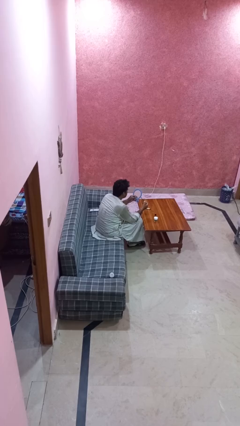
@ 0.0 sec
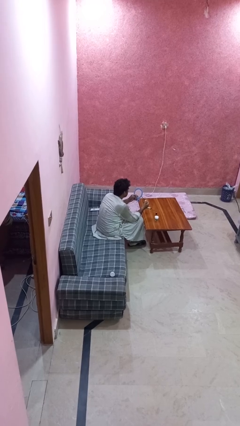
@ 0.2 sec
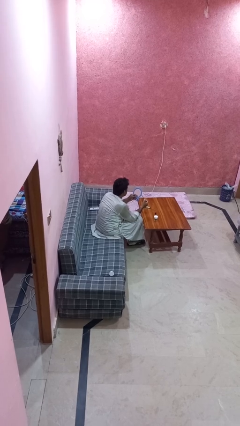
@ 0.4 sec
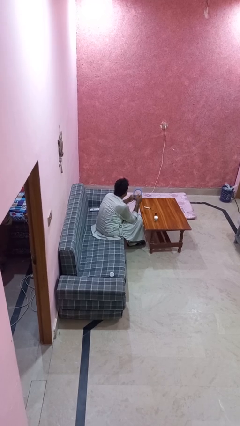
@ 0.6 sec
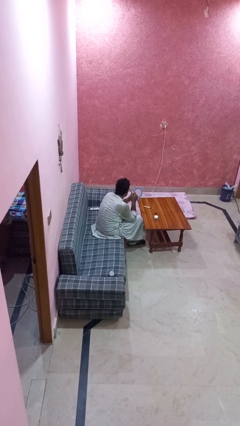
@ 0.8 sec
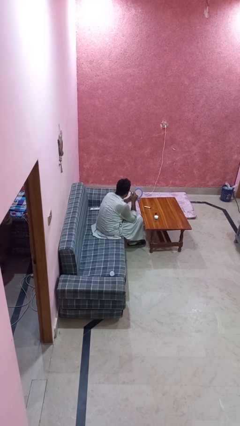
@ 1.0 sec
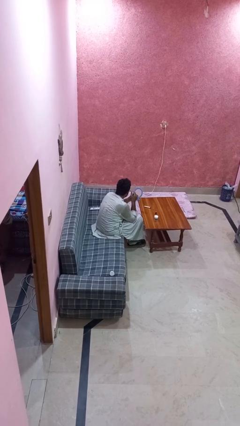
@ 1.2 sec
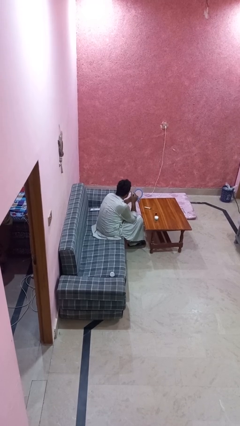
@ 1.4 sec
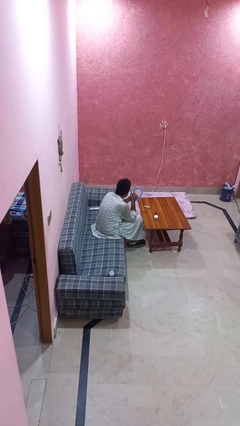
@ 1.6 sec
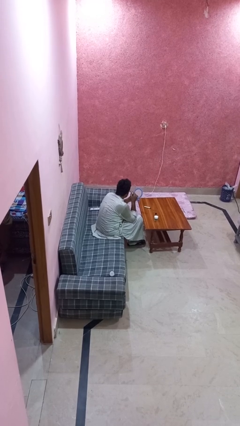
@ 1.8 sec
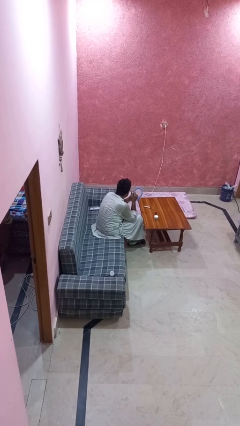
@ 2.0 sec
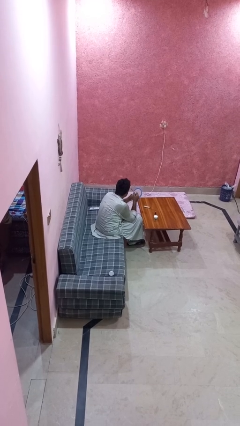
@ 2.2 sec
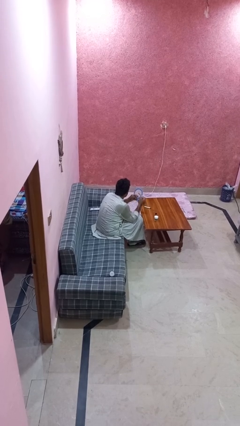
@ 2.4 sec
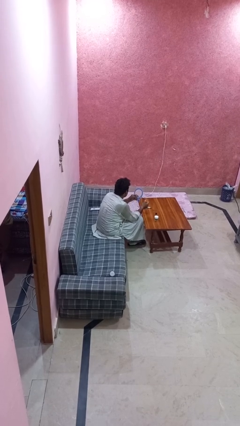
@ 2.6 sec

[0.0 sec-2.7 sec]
person applies eye makeup

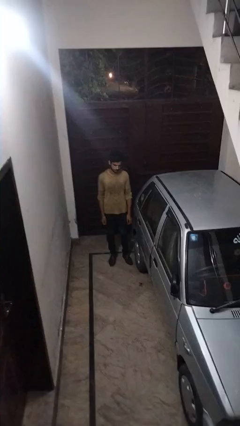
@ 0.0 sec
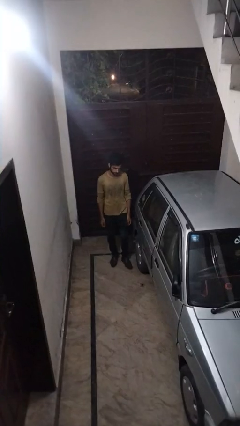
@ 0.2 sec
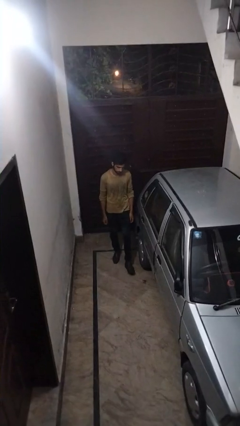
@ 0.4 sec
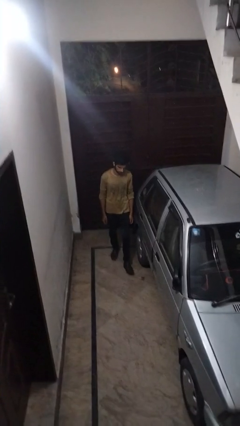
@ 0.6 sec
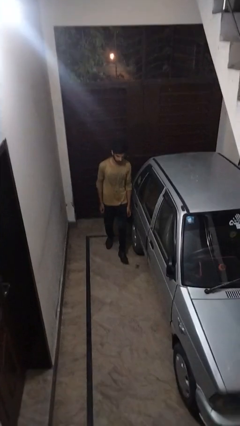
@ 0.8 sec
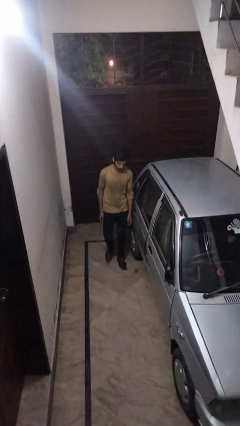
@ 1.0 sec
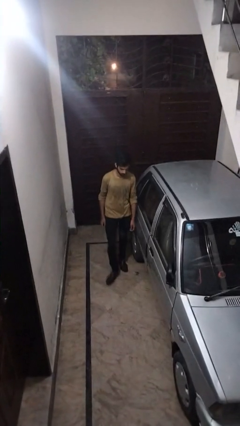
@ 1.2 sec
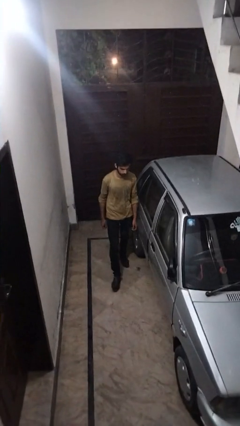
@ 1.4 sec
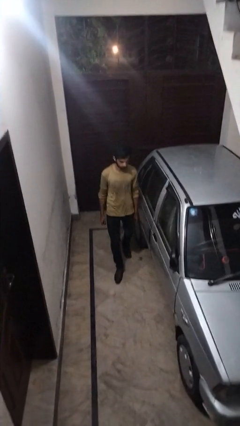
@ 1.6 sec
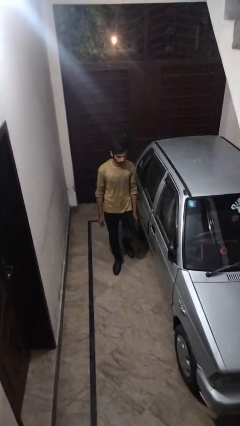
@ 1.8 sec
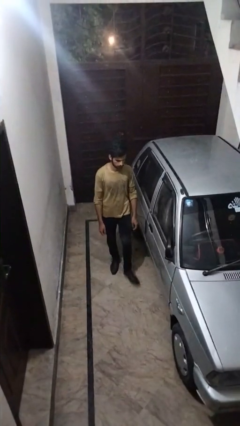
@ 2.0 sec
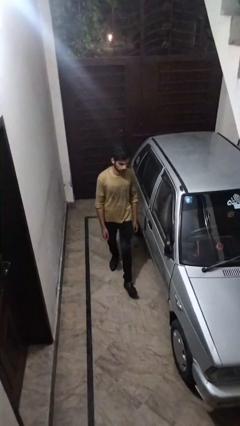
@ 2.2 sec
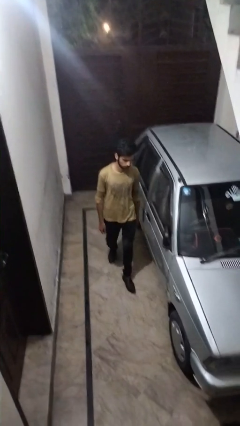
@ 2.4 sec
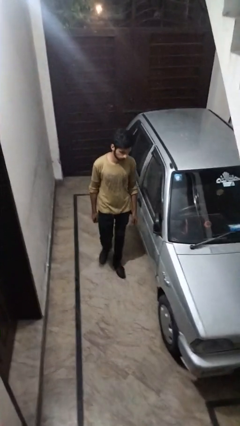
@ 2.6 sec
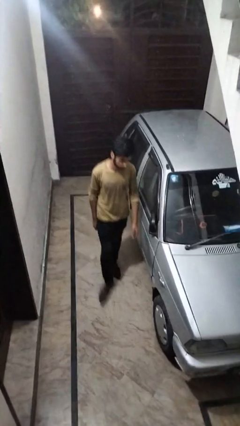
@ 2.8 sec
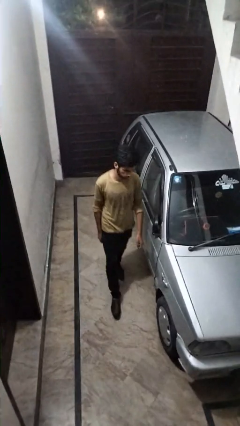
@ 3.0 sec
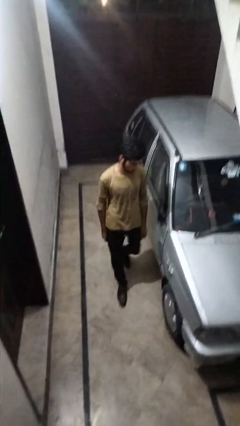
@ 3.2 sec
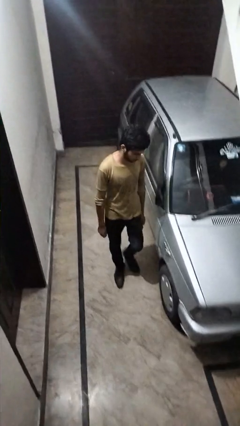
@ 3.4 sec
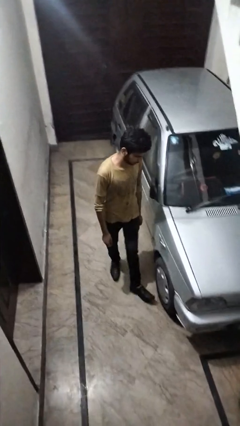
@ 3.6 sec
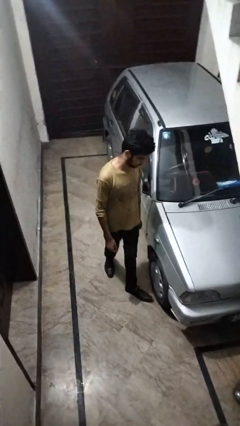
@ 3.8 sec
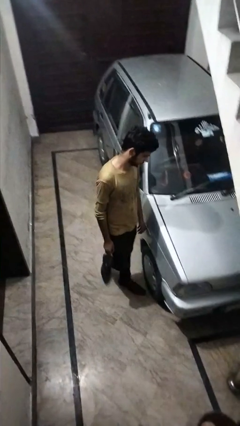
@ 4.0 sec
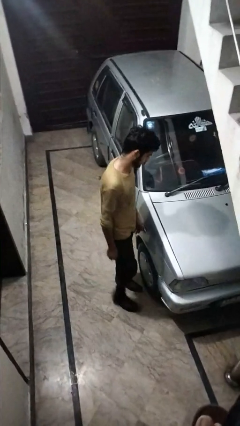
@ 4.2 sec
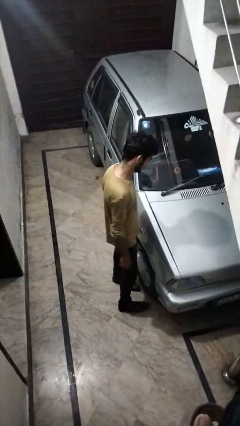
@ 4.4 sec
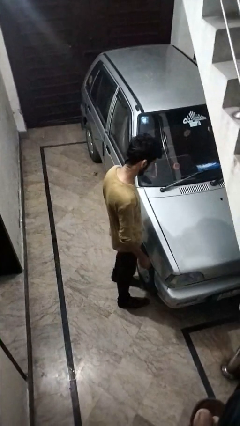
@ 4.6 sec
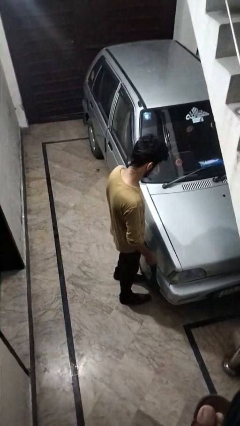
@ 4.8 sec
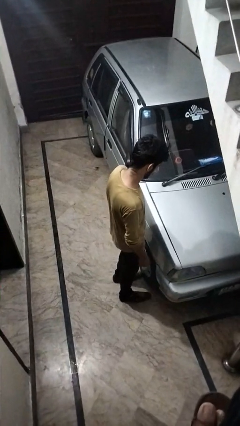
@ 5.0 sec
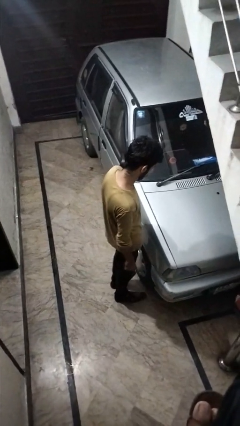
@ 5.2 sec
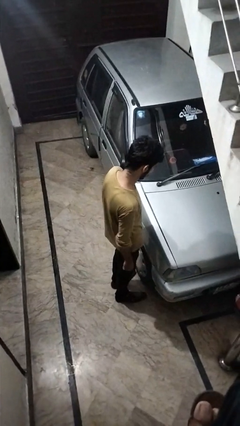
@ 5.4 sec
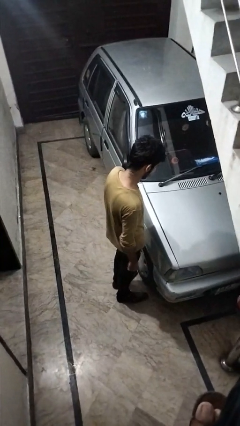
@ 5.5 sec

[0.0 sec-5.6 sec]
person walks around car

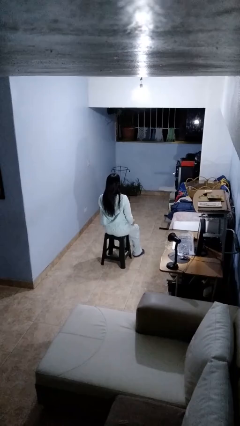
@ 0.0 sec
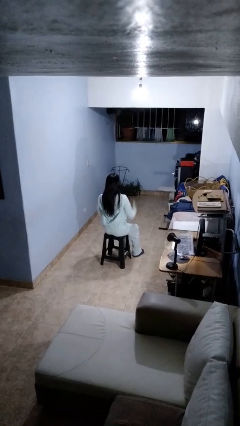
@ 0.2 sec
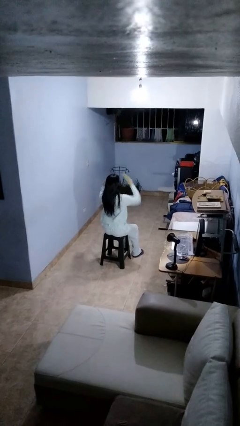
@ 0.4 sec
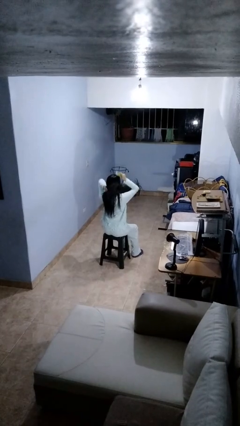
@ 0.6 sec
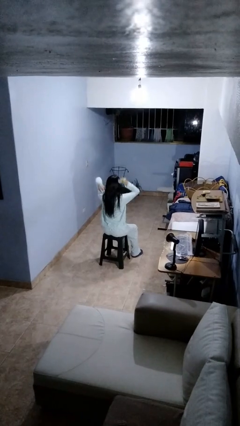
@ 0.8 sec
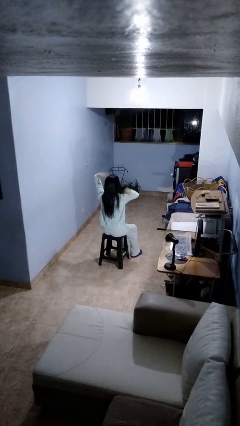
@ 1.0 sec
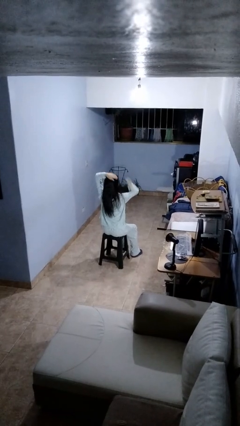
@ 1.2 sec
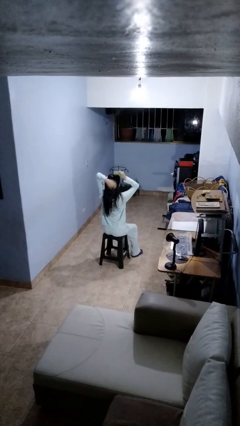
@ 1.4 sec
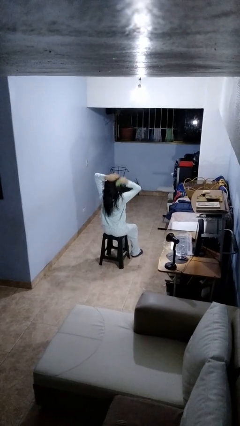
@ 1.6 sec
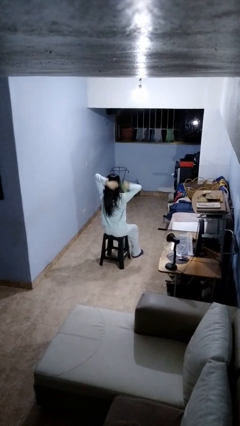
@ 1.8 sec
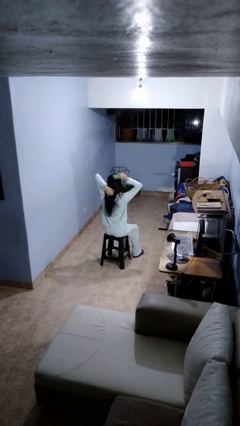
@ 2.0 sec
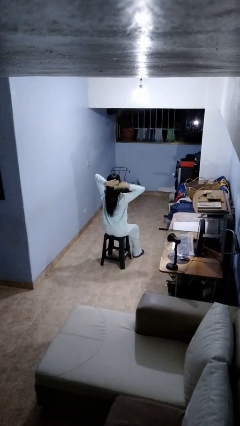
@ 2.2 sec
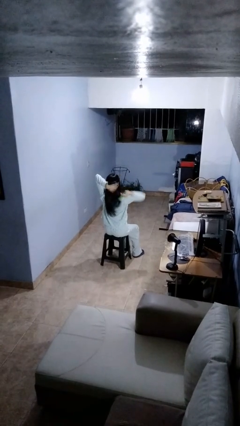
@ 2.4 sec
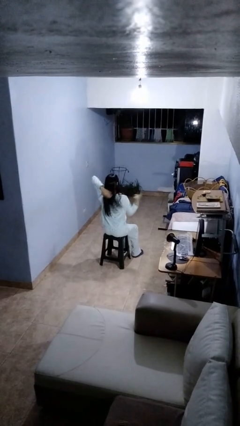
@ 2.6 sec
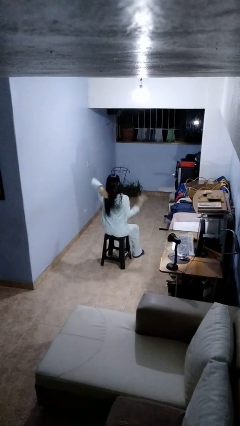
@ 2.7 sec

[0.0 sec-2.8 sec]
person brushes hair

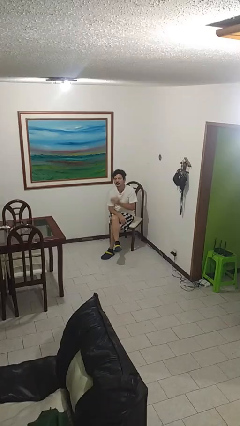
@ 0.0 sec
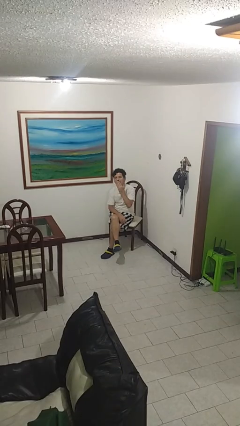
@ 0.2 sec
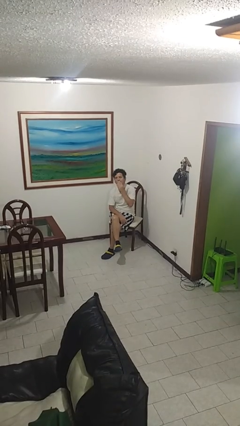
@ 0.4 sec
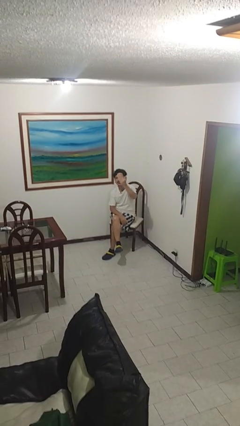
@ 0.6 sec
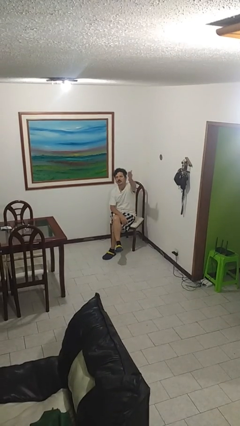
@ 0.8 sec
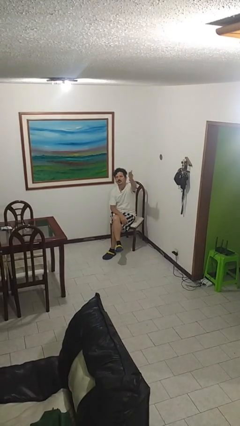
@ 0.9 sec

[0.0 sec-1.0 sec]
person gestures blow kiss

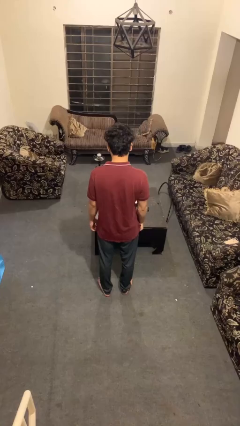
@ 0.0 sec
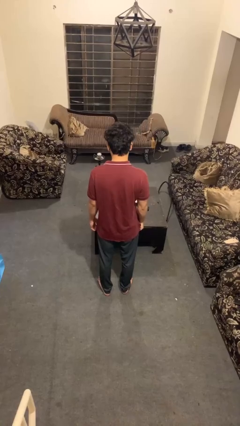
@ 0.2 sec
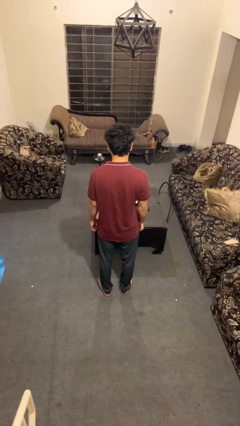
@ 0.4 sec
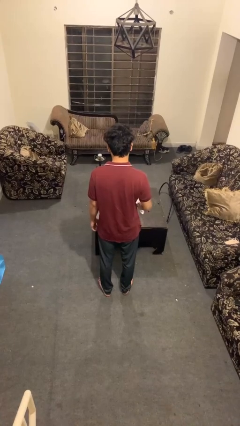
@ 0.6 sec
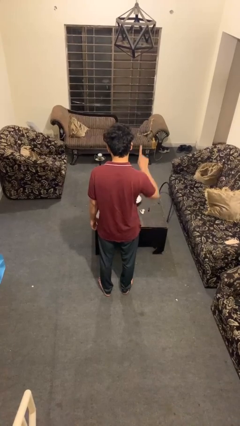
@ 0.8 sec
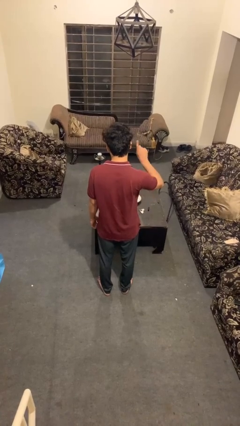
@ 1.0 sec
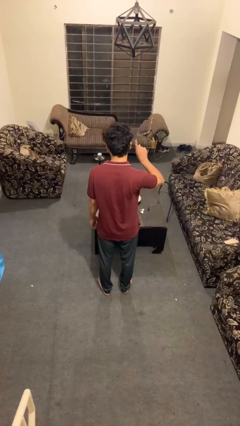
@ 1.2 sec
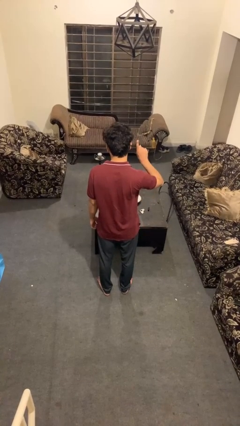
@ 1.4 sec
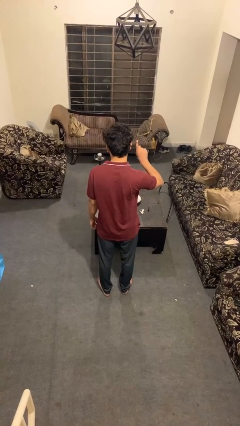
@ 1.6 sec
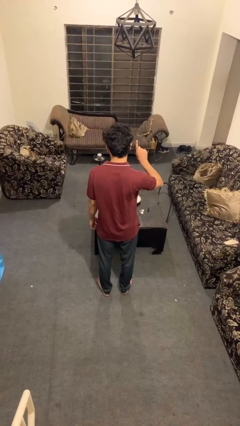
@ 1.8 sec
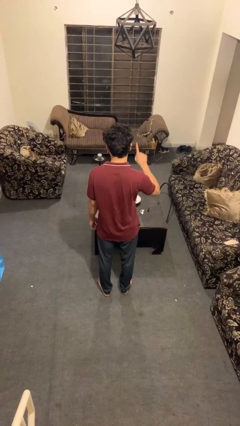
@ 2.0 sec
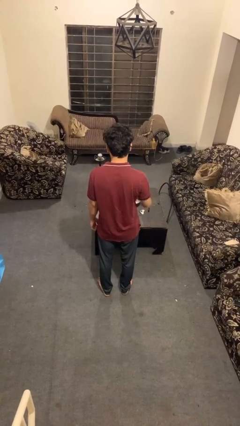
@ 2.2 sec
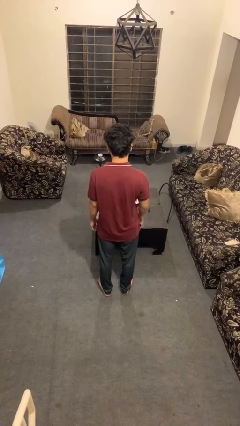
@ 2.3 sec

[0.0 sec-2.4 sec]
person gestures number one

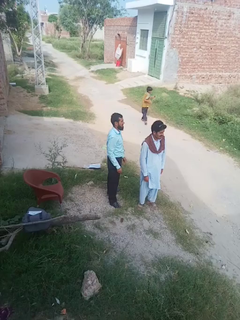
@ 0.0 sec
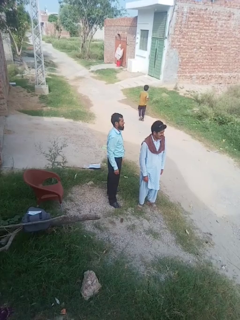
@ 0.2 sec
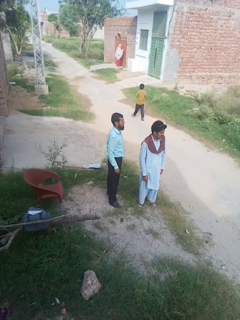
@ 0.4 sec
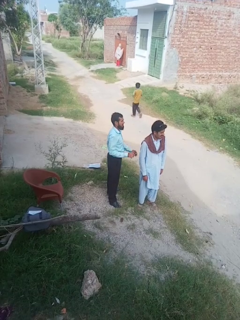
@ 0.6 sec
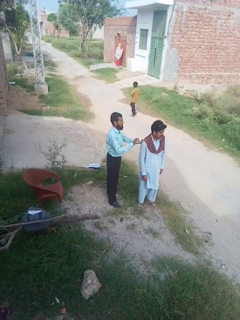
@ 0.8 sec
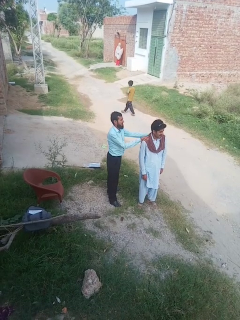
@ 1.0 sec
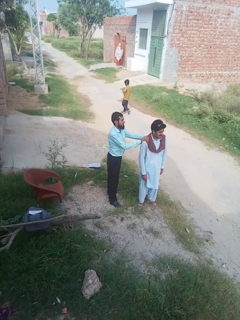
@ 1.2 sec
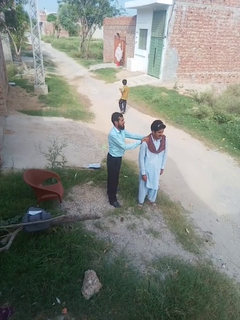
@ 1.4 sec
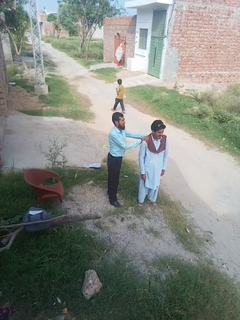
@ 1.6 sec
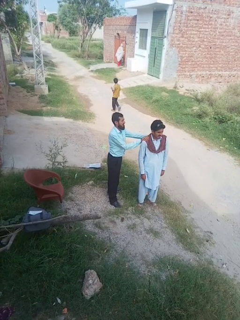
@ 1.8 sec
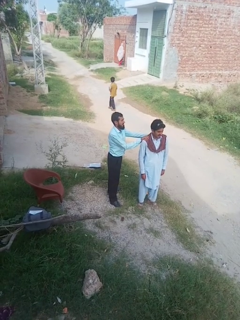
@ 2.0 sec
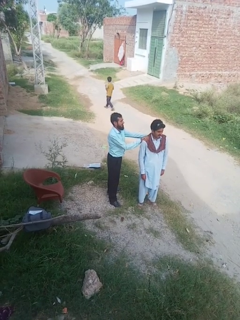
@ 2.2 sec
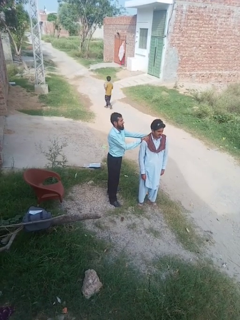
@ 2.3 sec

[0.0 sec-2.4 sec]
person grabs person by shoulder

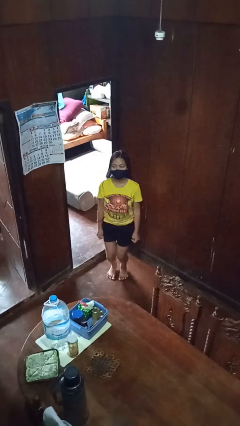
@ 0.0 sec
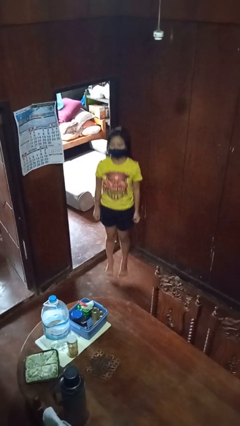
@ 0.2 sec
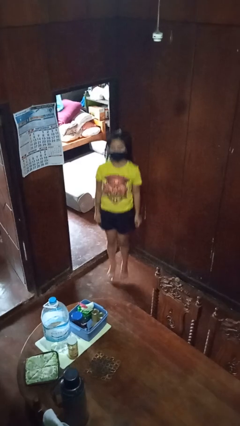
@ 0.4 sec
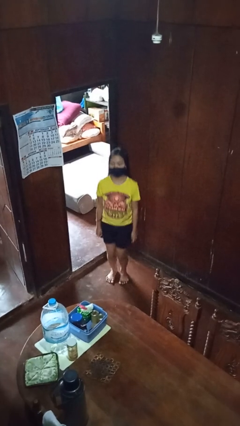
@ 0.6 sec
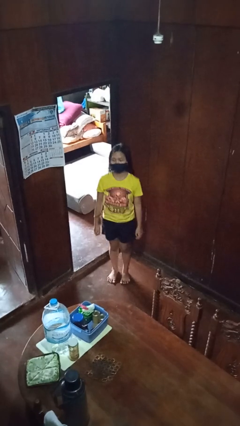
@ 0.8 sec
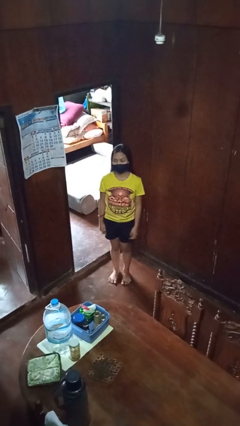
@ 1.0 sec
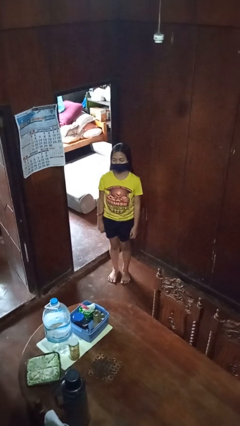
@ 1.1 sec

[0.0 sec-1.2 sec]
person jumps
